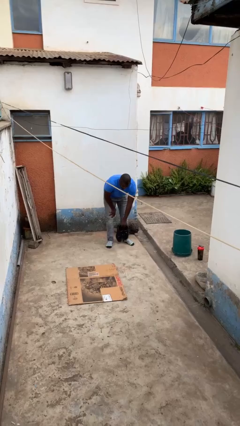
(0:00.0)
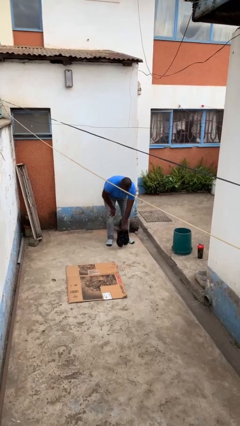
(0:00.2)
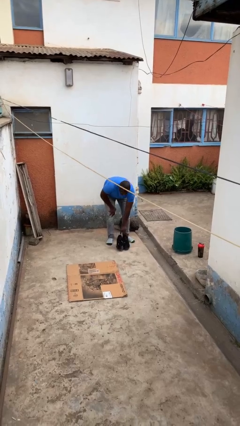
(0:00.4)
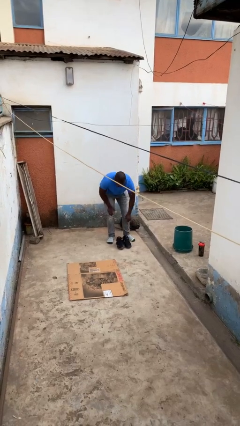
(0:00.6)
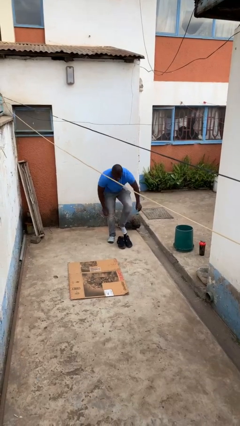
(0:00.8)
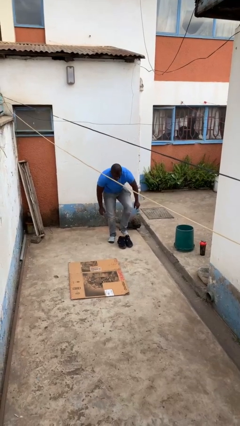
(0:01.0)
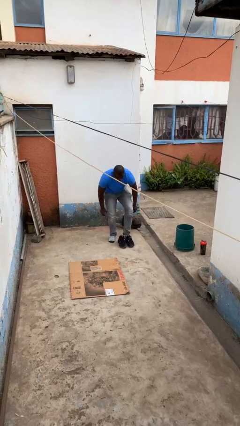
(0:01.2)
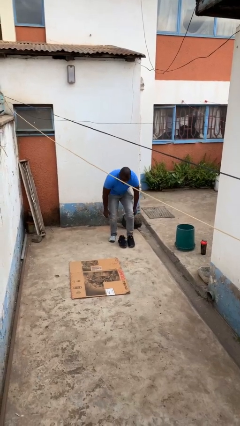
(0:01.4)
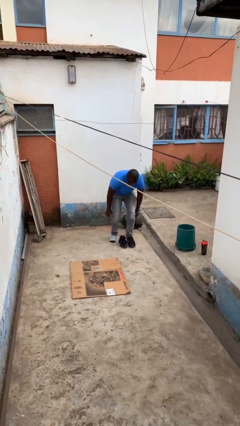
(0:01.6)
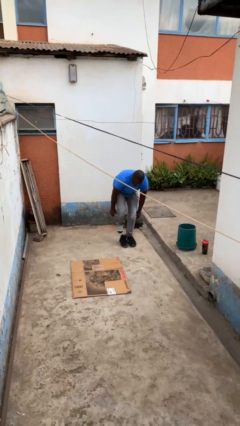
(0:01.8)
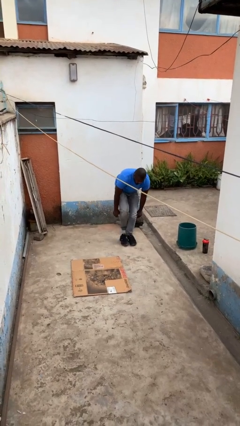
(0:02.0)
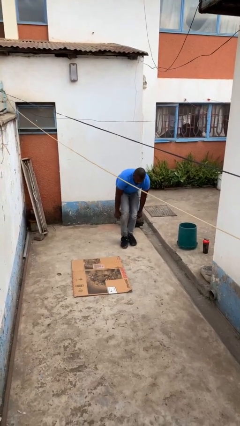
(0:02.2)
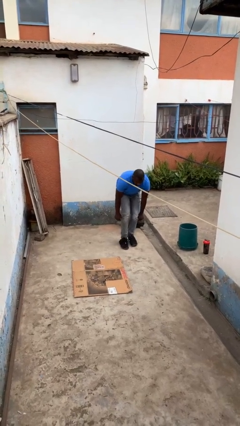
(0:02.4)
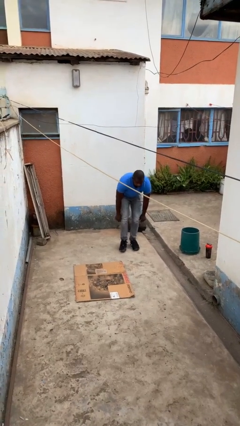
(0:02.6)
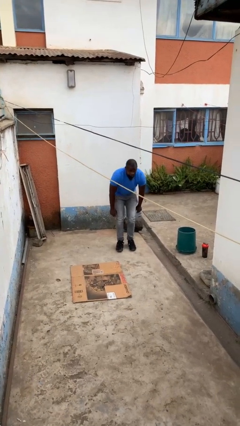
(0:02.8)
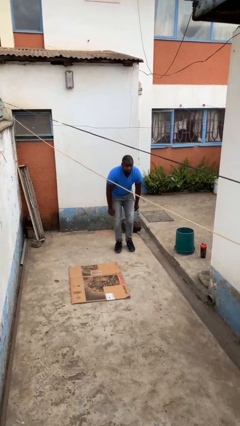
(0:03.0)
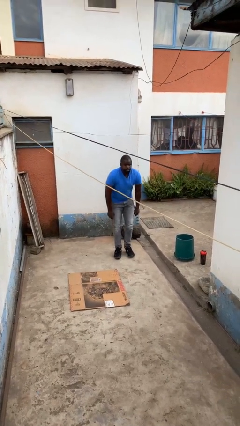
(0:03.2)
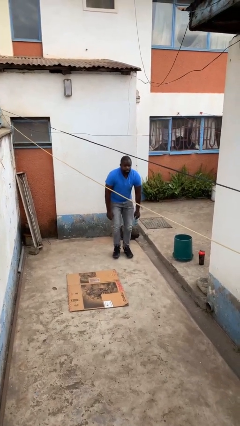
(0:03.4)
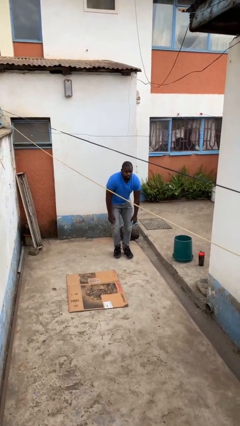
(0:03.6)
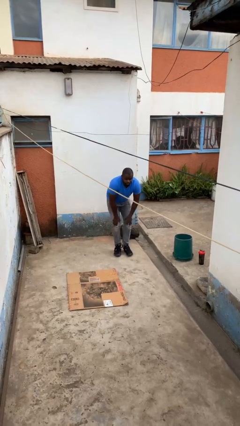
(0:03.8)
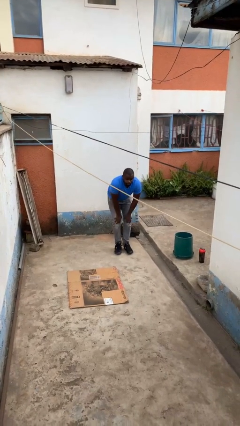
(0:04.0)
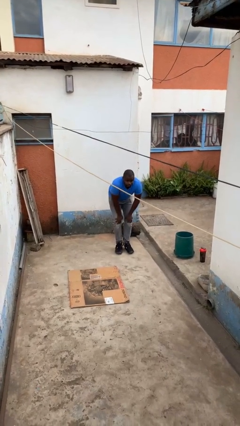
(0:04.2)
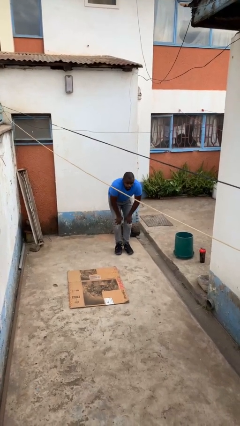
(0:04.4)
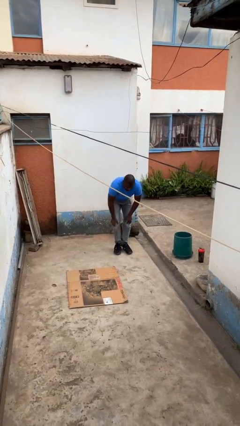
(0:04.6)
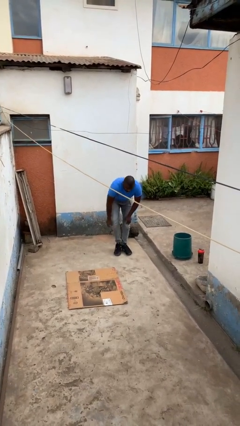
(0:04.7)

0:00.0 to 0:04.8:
person puts on shoes

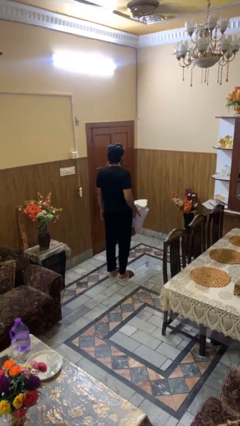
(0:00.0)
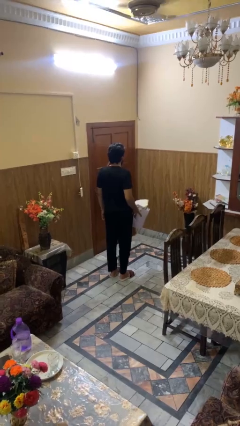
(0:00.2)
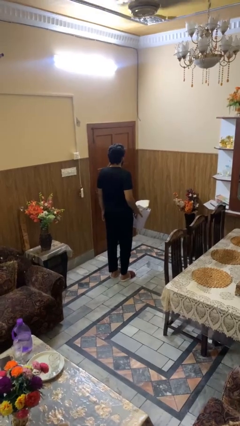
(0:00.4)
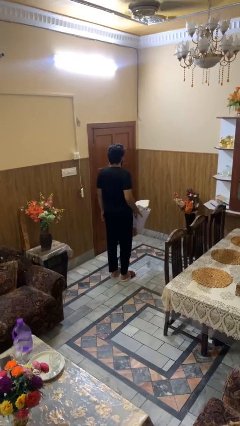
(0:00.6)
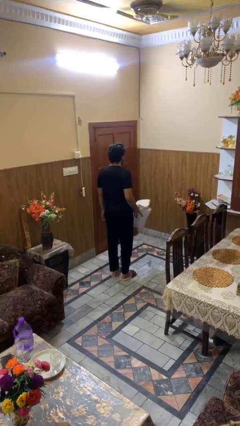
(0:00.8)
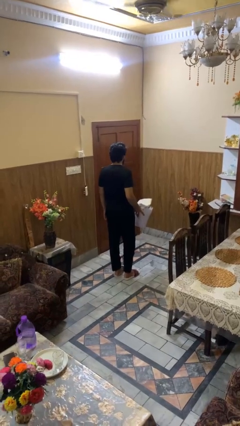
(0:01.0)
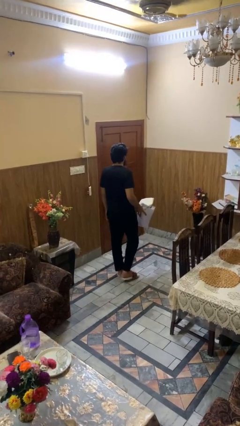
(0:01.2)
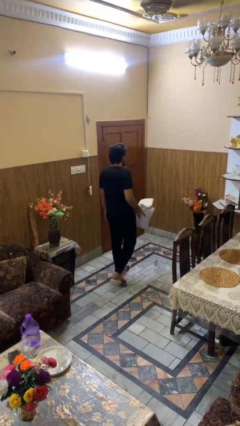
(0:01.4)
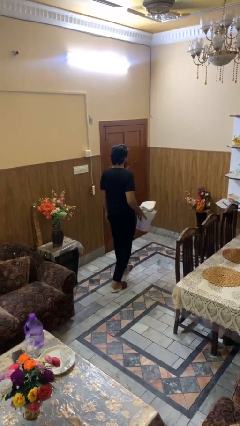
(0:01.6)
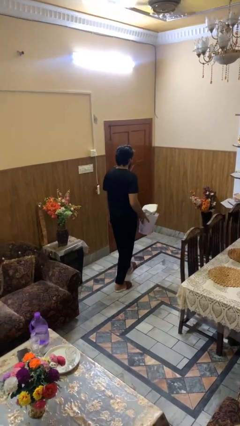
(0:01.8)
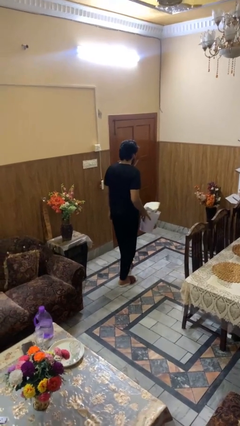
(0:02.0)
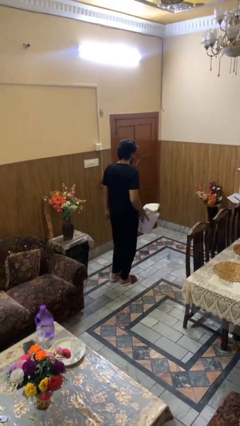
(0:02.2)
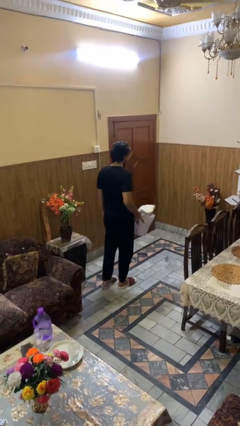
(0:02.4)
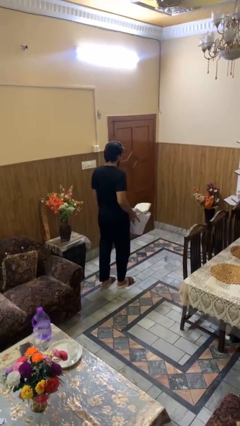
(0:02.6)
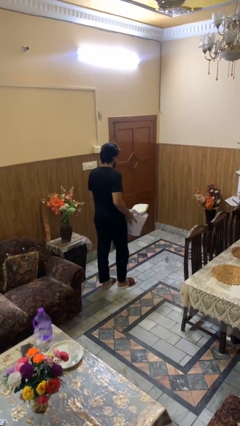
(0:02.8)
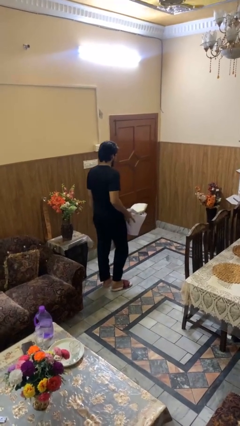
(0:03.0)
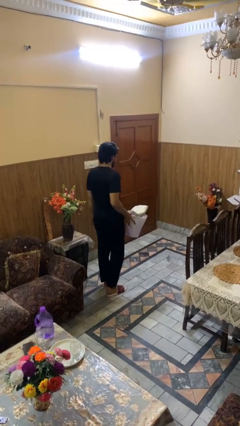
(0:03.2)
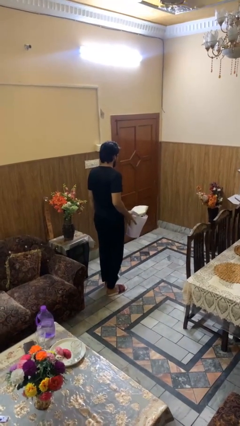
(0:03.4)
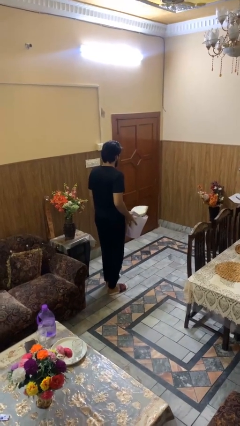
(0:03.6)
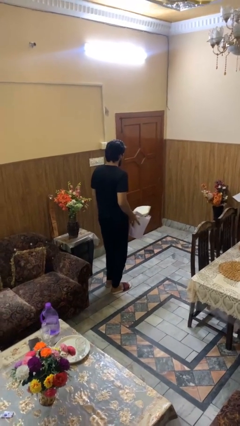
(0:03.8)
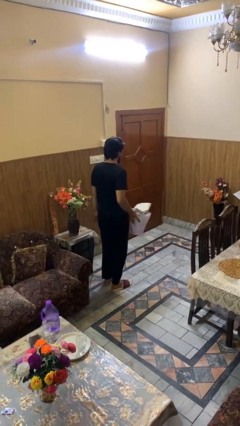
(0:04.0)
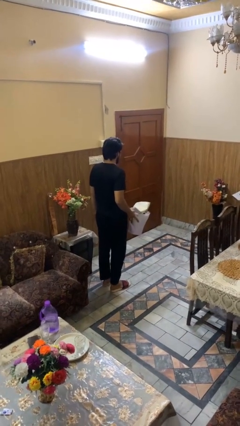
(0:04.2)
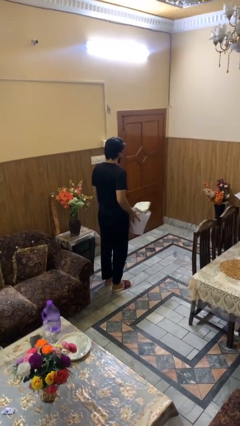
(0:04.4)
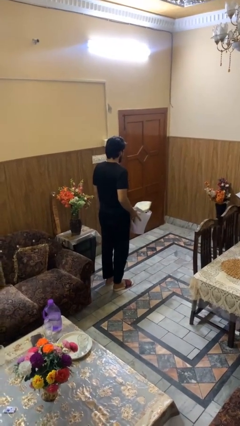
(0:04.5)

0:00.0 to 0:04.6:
person carries laundry basket

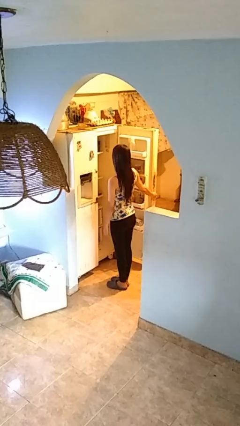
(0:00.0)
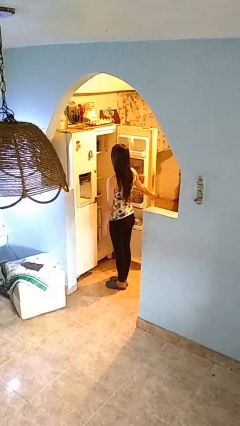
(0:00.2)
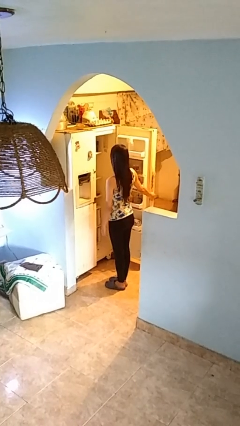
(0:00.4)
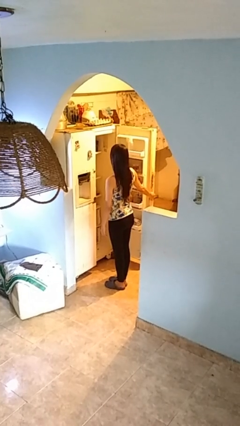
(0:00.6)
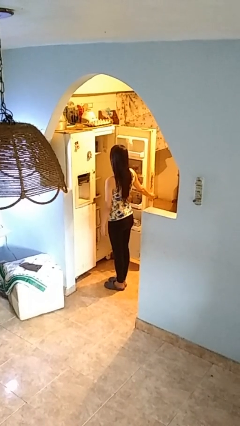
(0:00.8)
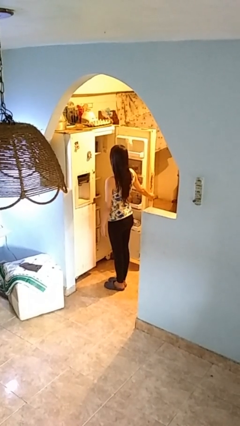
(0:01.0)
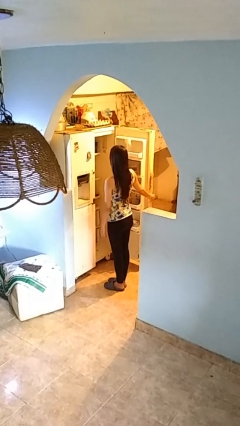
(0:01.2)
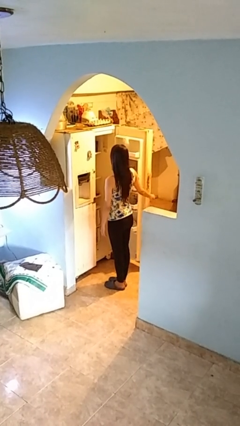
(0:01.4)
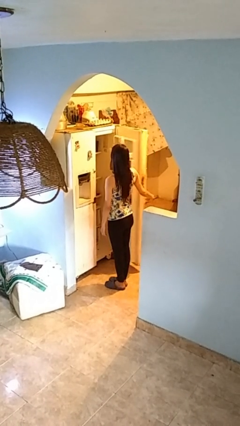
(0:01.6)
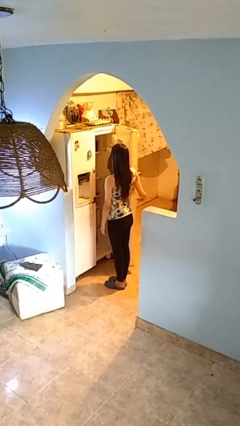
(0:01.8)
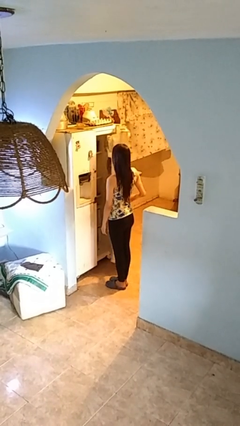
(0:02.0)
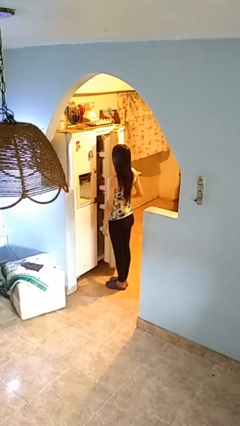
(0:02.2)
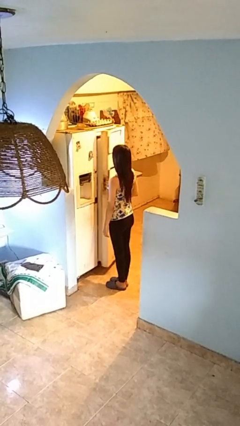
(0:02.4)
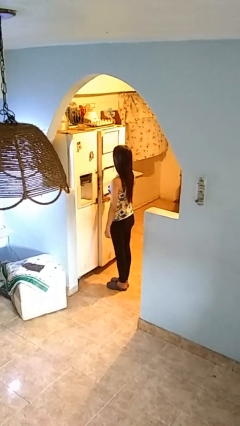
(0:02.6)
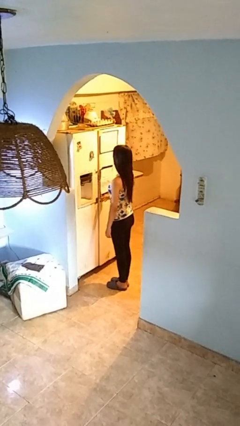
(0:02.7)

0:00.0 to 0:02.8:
person closes refrigerator

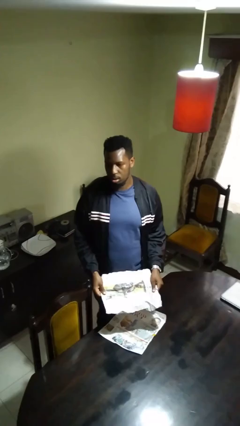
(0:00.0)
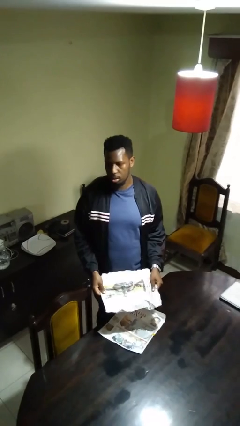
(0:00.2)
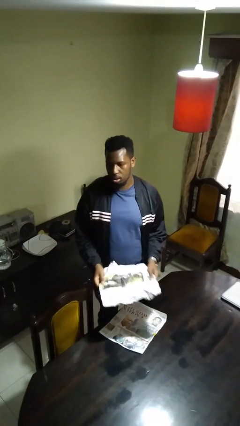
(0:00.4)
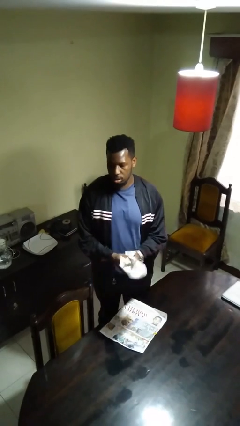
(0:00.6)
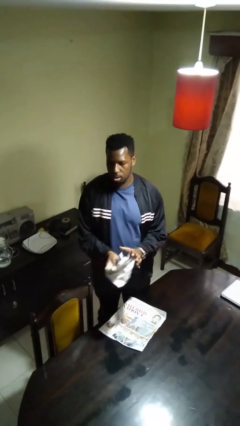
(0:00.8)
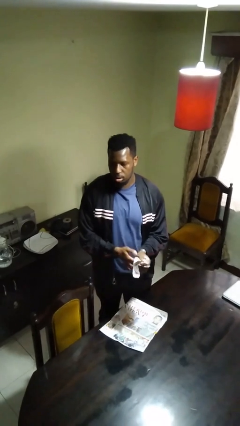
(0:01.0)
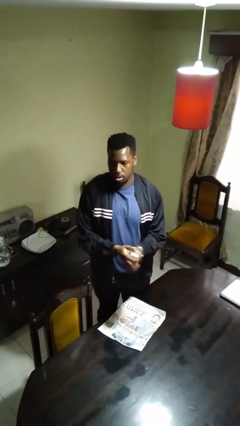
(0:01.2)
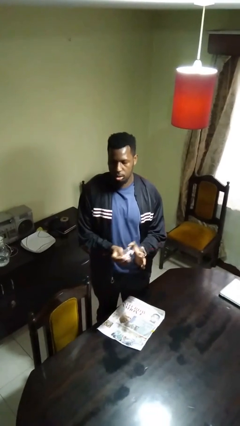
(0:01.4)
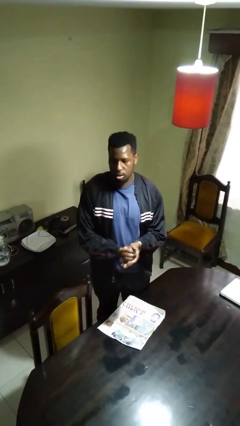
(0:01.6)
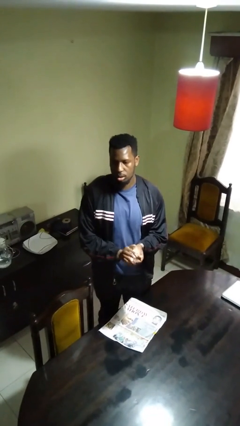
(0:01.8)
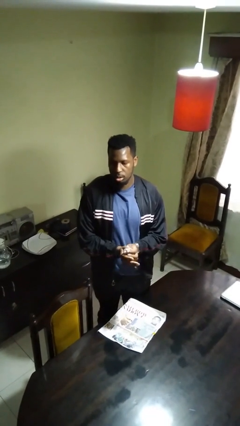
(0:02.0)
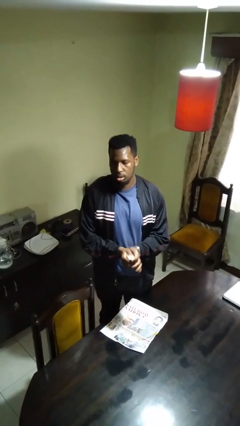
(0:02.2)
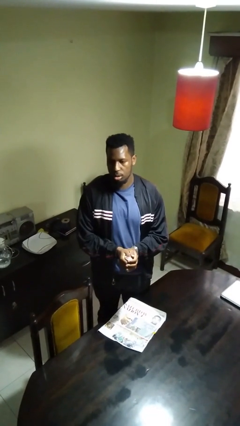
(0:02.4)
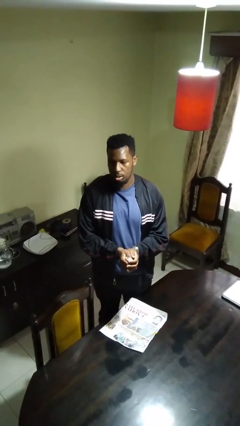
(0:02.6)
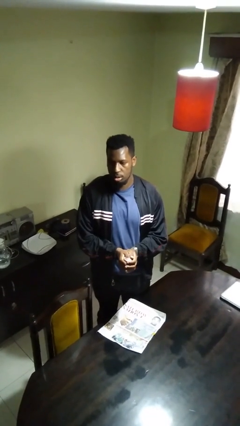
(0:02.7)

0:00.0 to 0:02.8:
person crumples paper

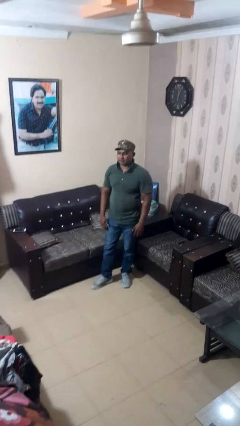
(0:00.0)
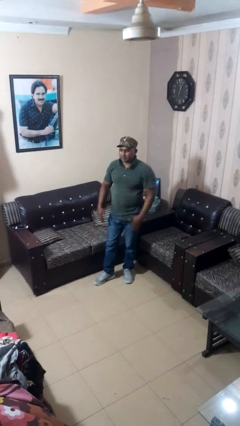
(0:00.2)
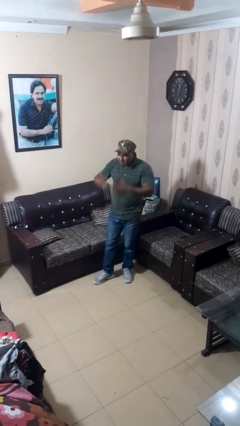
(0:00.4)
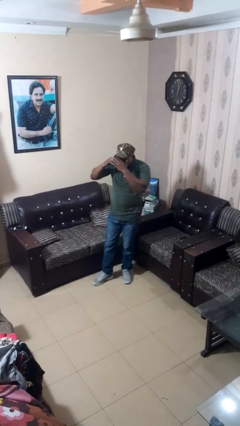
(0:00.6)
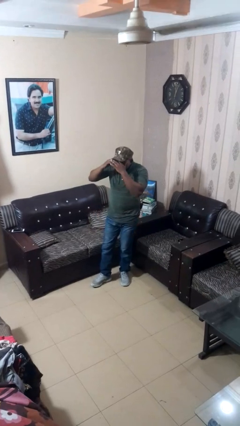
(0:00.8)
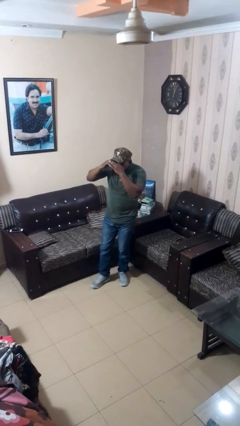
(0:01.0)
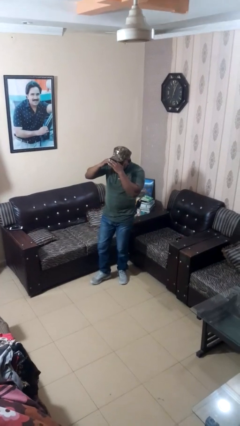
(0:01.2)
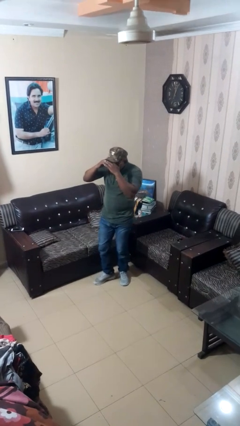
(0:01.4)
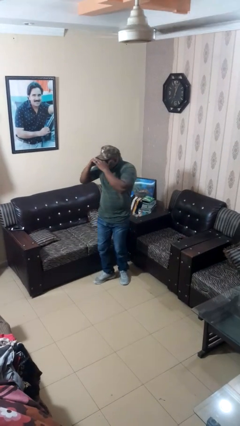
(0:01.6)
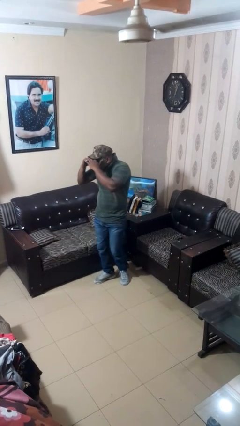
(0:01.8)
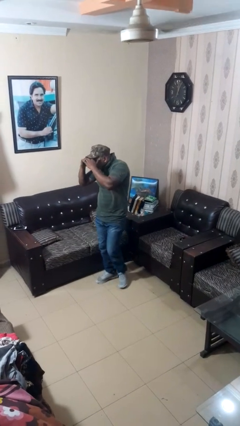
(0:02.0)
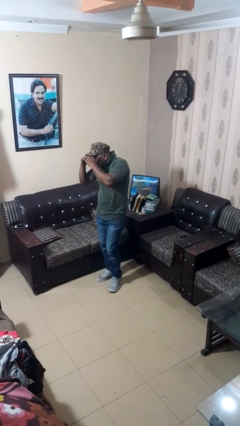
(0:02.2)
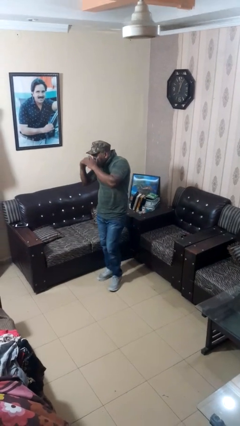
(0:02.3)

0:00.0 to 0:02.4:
person shades eyes

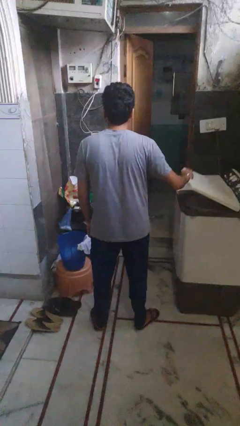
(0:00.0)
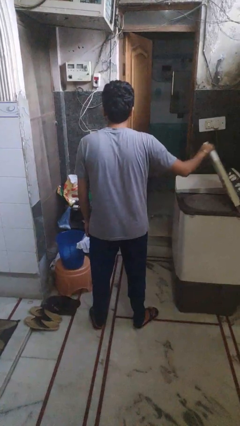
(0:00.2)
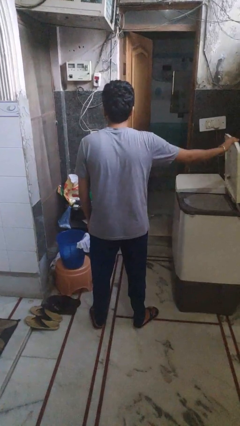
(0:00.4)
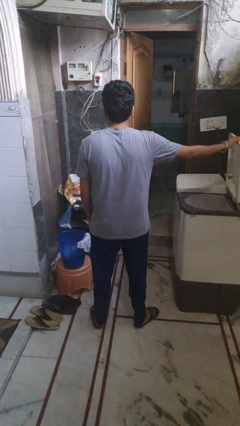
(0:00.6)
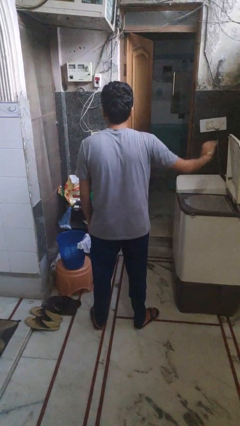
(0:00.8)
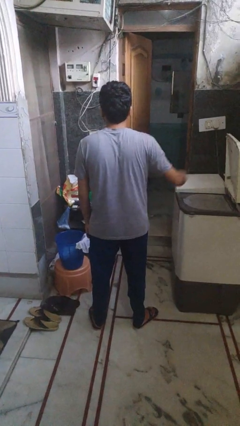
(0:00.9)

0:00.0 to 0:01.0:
person opens clothes washer
